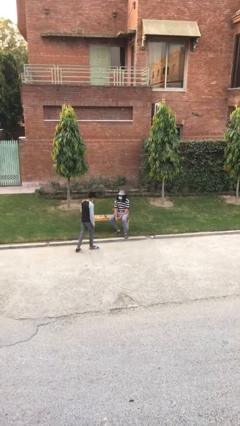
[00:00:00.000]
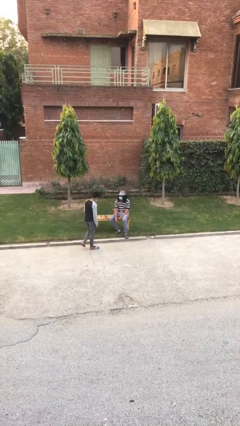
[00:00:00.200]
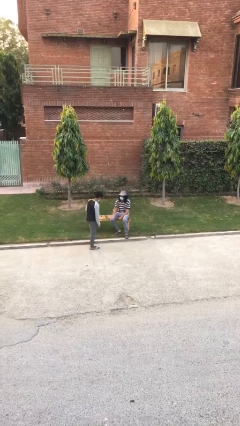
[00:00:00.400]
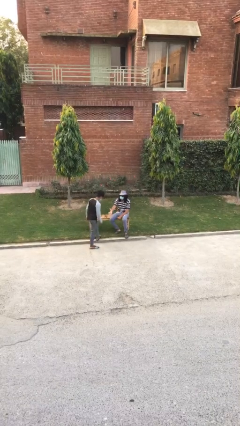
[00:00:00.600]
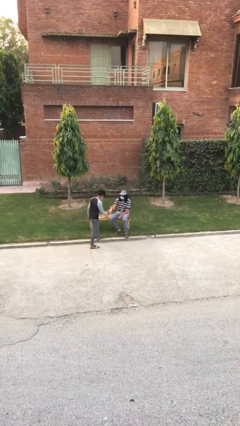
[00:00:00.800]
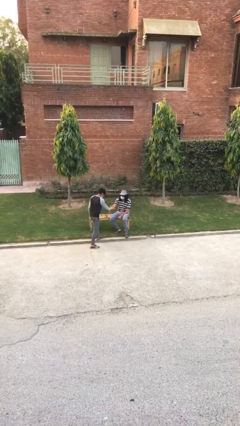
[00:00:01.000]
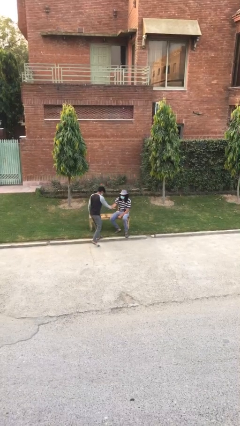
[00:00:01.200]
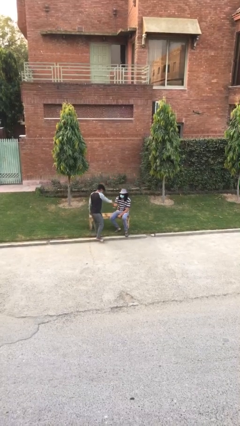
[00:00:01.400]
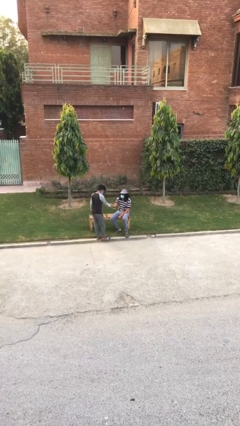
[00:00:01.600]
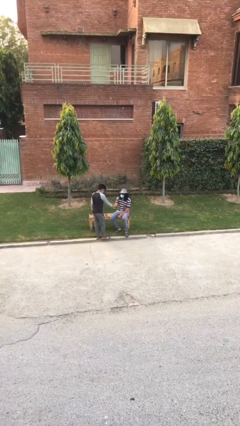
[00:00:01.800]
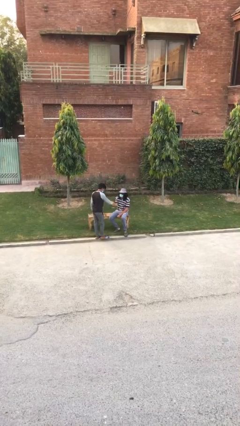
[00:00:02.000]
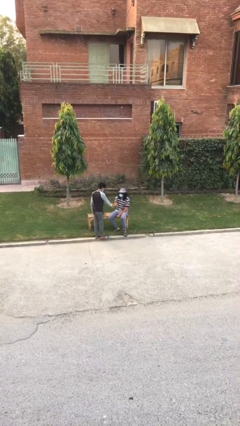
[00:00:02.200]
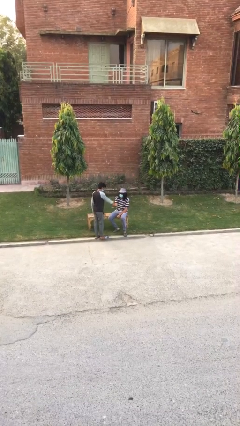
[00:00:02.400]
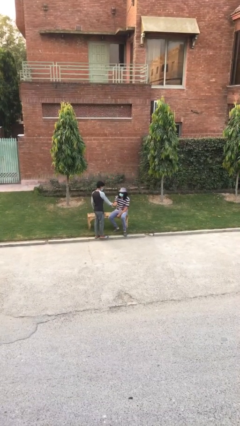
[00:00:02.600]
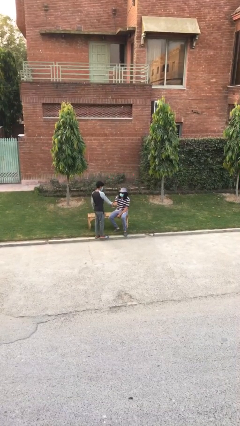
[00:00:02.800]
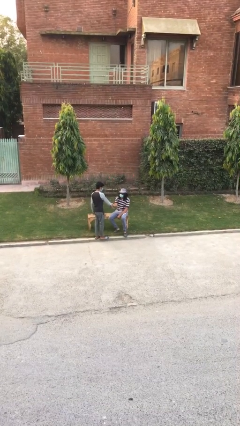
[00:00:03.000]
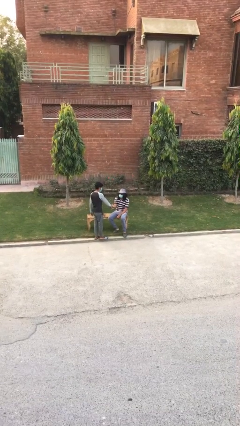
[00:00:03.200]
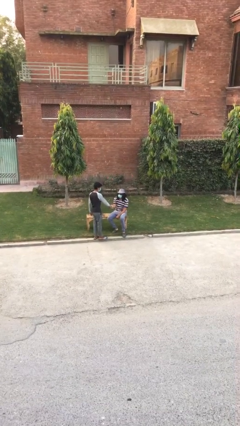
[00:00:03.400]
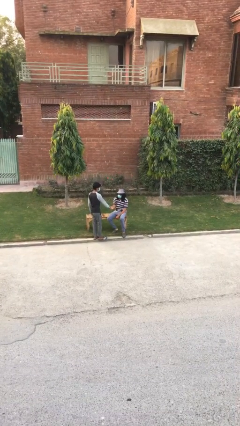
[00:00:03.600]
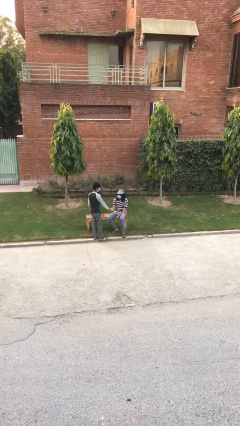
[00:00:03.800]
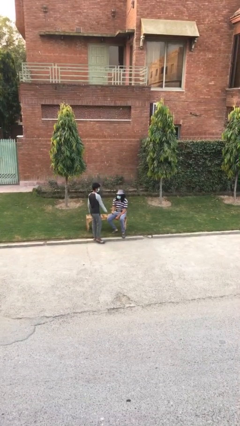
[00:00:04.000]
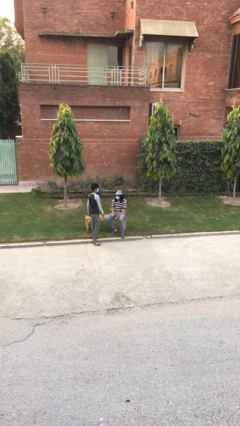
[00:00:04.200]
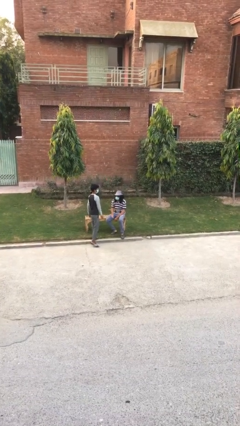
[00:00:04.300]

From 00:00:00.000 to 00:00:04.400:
person shakes hand

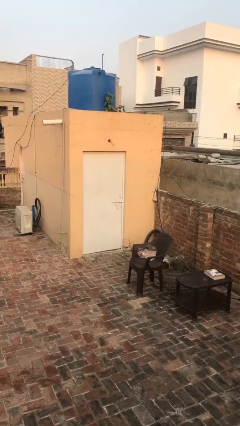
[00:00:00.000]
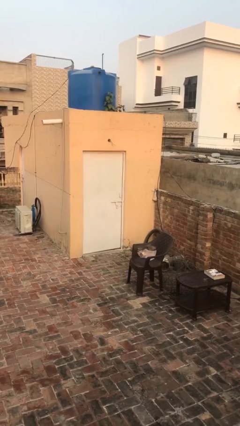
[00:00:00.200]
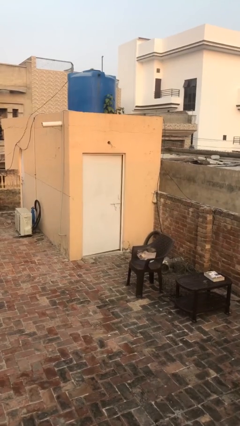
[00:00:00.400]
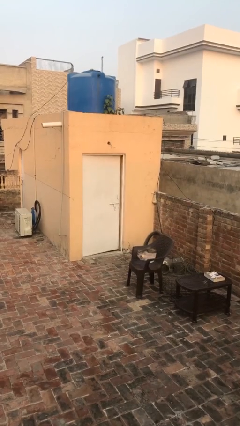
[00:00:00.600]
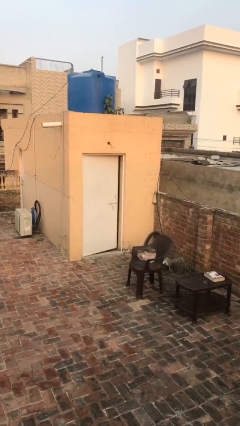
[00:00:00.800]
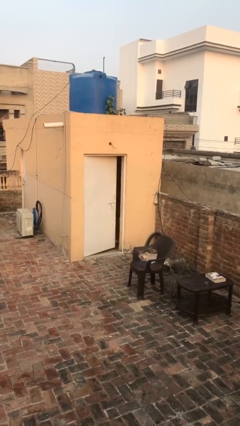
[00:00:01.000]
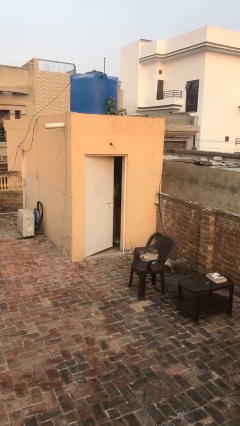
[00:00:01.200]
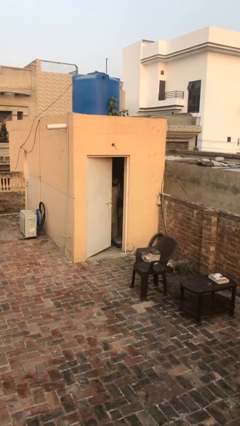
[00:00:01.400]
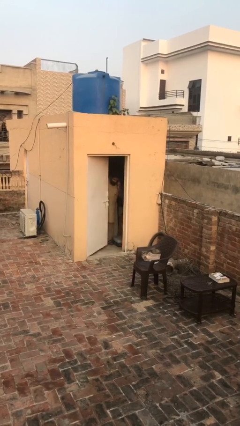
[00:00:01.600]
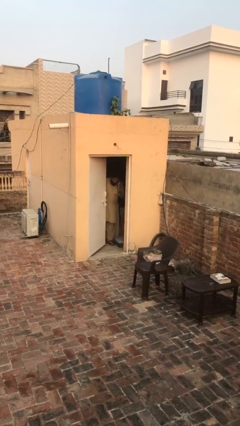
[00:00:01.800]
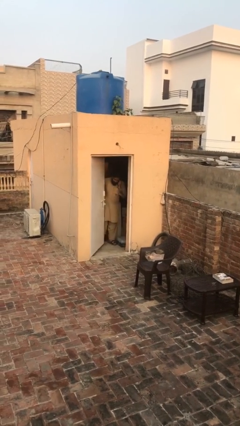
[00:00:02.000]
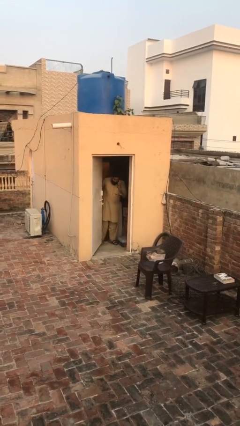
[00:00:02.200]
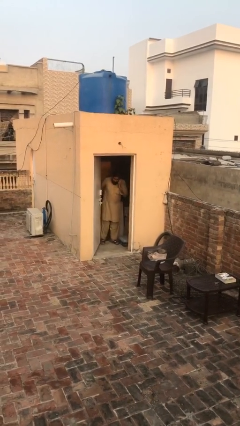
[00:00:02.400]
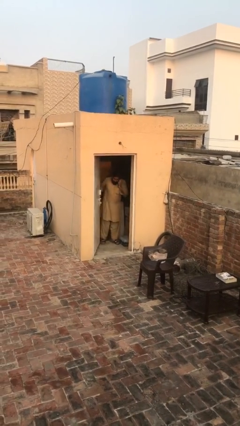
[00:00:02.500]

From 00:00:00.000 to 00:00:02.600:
person opens facility door

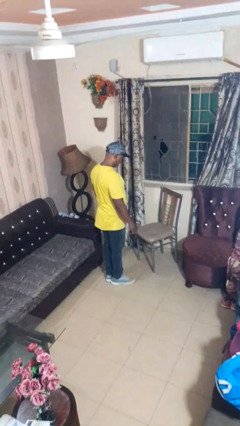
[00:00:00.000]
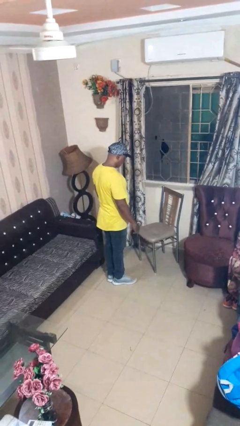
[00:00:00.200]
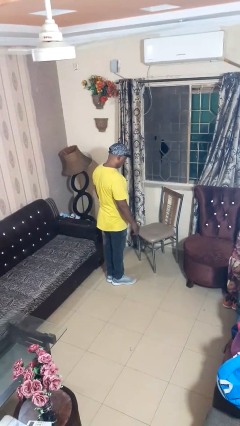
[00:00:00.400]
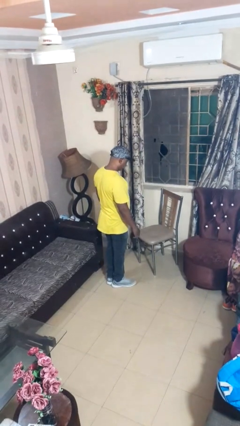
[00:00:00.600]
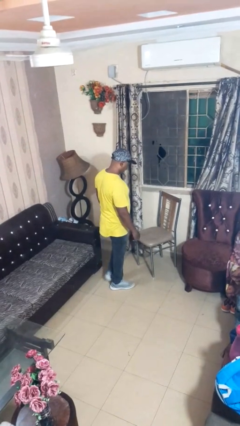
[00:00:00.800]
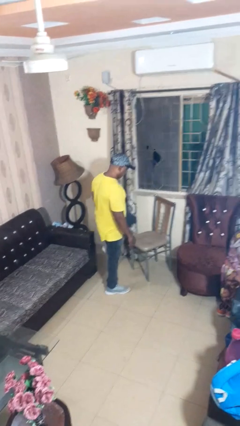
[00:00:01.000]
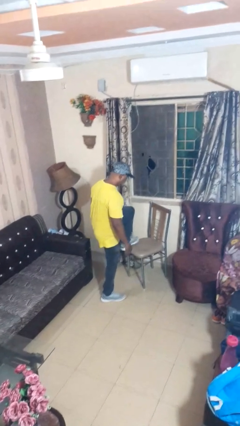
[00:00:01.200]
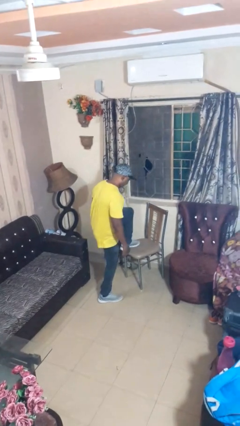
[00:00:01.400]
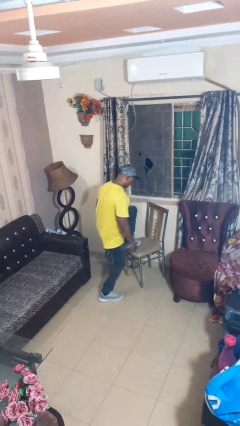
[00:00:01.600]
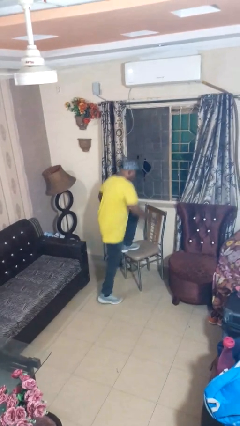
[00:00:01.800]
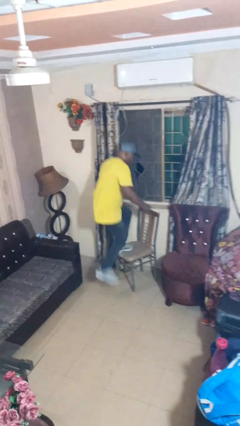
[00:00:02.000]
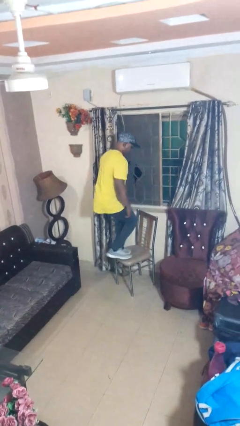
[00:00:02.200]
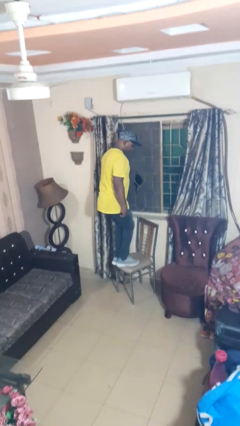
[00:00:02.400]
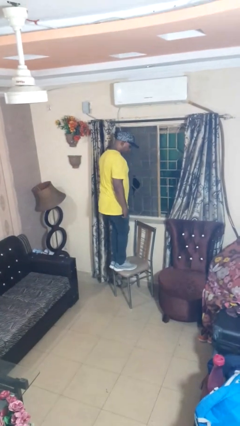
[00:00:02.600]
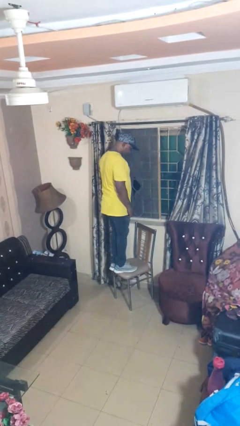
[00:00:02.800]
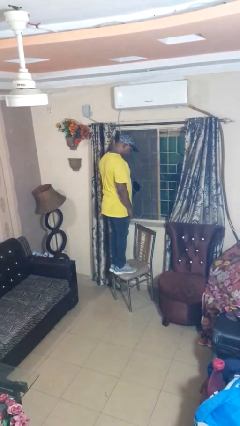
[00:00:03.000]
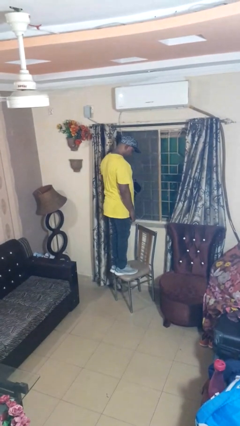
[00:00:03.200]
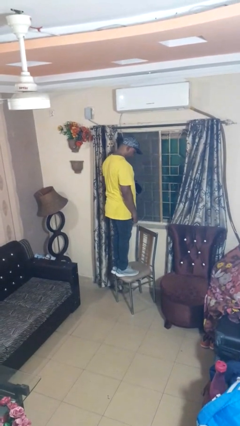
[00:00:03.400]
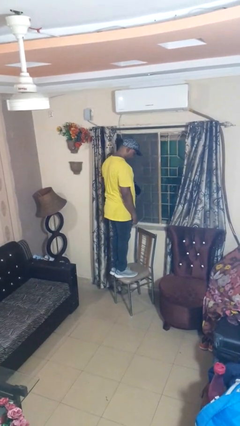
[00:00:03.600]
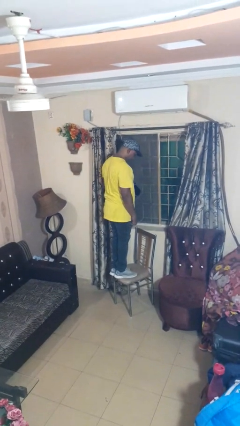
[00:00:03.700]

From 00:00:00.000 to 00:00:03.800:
person climbs on chair

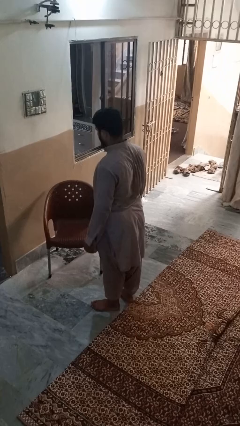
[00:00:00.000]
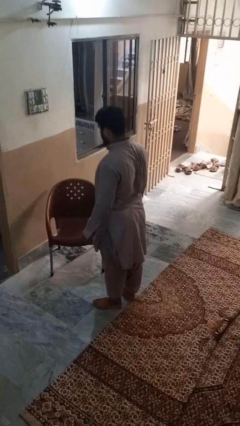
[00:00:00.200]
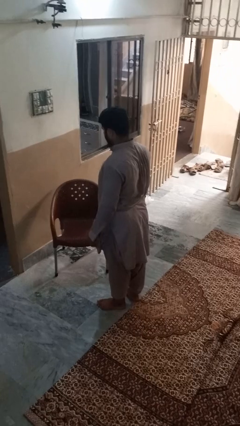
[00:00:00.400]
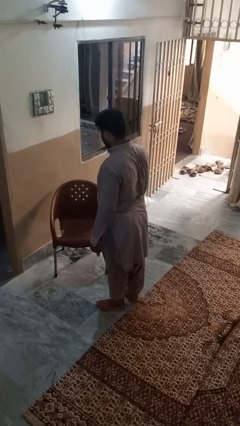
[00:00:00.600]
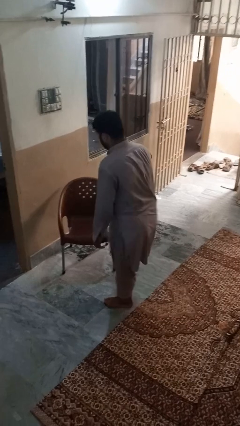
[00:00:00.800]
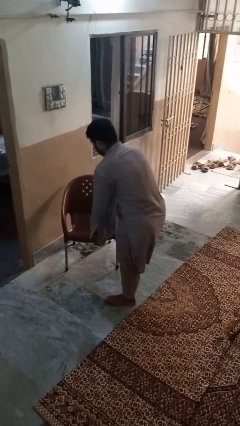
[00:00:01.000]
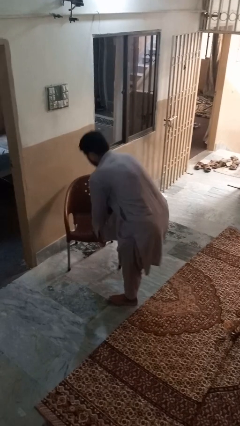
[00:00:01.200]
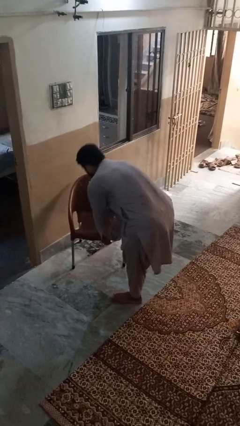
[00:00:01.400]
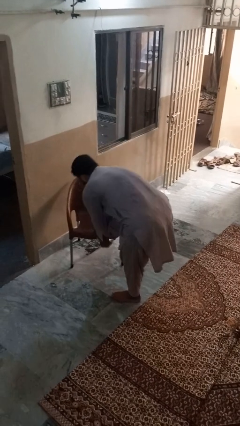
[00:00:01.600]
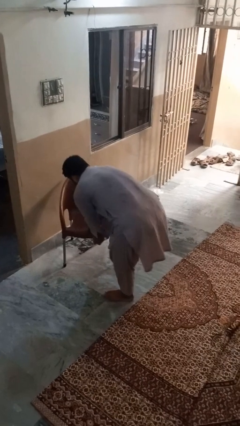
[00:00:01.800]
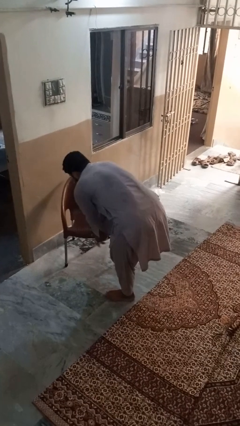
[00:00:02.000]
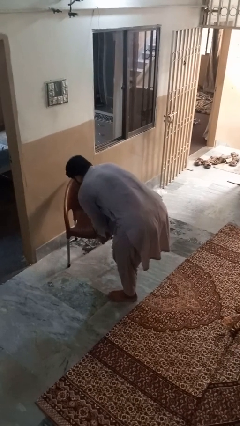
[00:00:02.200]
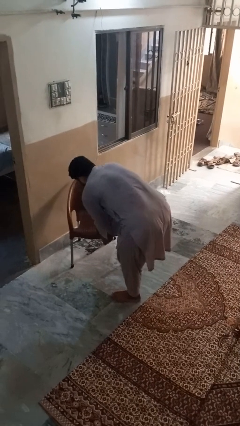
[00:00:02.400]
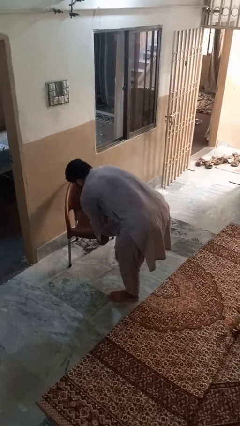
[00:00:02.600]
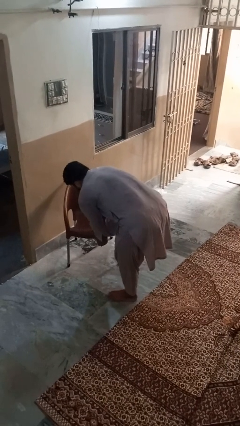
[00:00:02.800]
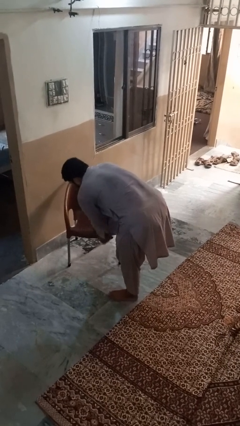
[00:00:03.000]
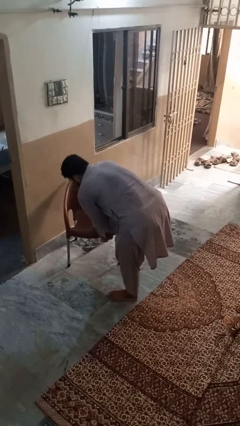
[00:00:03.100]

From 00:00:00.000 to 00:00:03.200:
person stubs toe

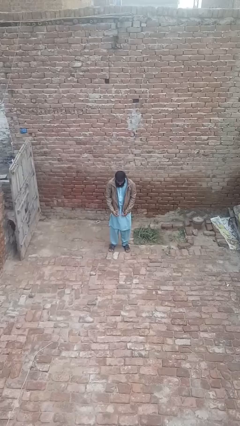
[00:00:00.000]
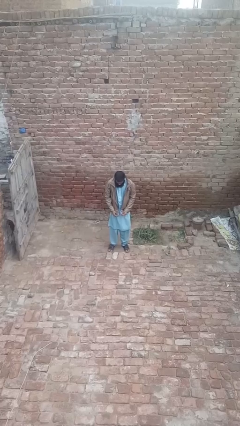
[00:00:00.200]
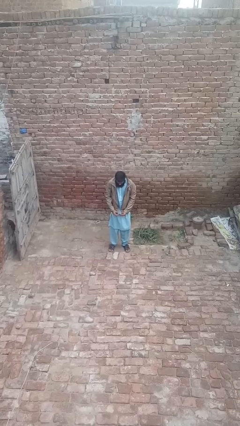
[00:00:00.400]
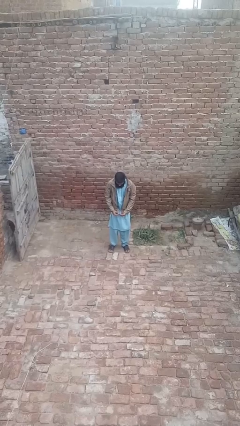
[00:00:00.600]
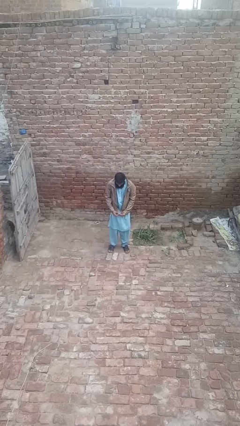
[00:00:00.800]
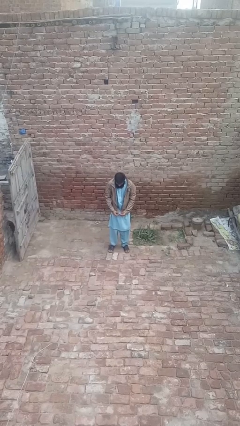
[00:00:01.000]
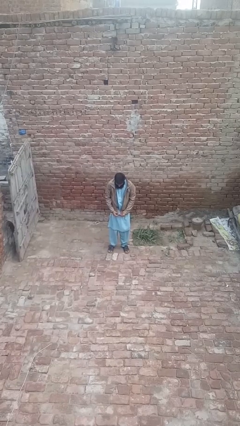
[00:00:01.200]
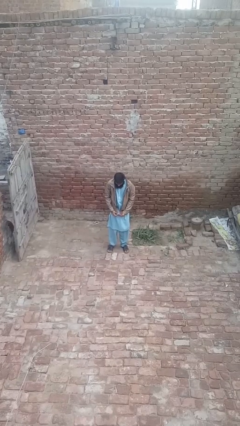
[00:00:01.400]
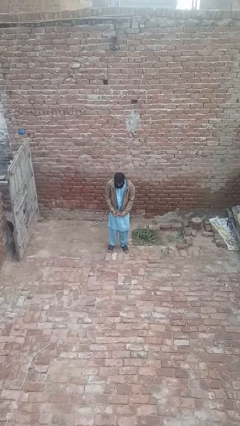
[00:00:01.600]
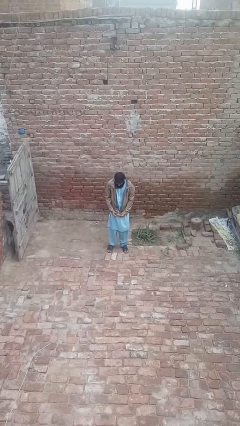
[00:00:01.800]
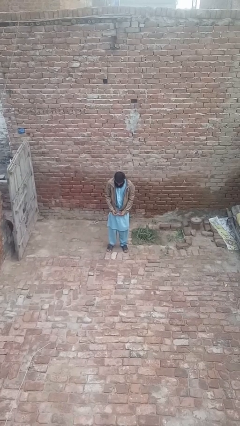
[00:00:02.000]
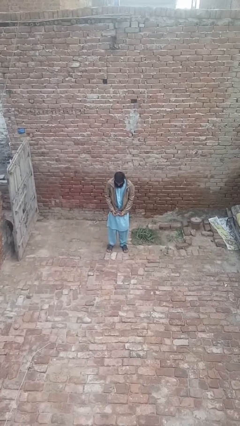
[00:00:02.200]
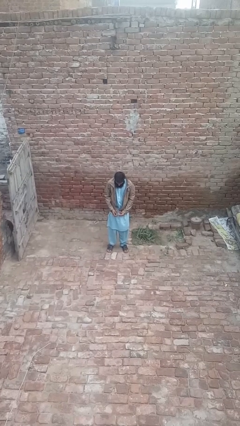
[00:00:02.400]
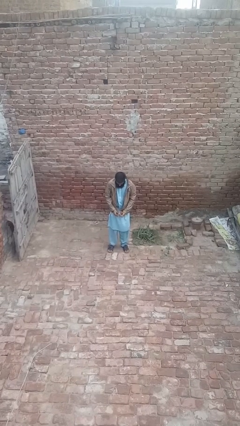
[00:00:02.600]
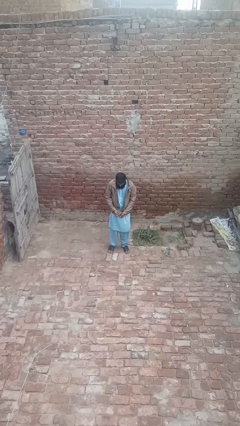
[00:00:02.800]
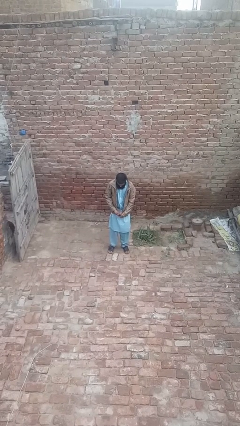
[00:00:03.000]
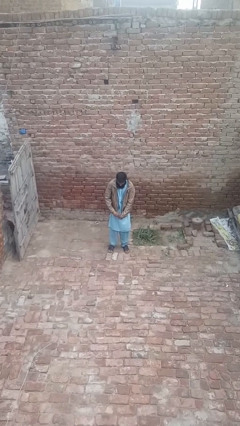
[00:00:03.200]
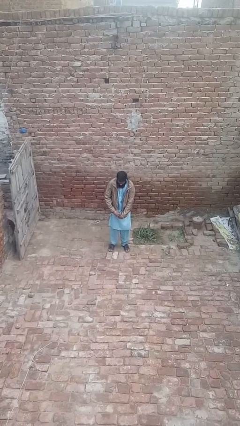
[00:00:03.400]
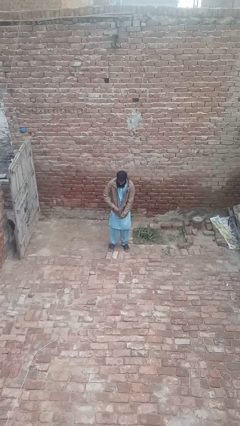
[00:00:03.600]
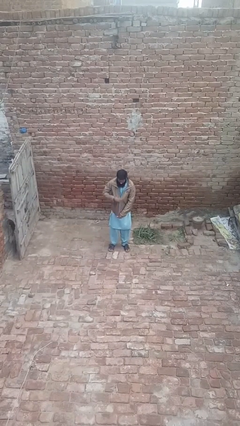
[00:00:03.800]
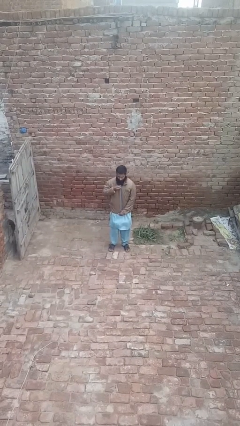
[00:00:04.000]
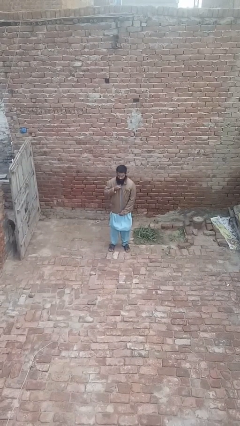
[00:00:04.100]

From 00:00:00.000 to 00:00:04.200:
person zips up jacket
